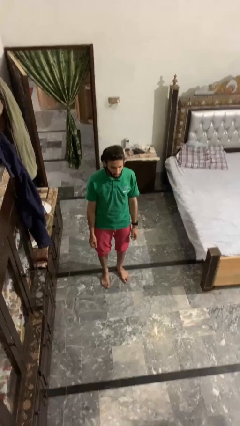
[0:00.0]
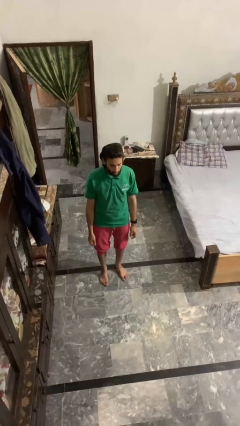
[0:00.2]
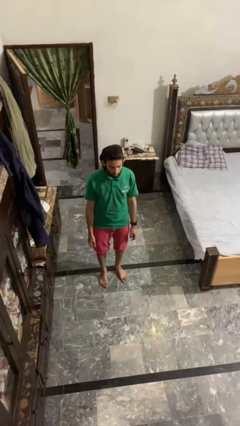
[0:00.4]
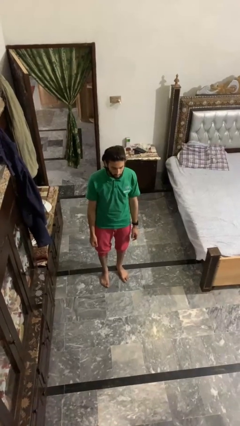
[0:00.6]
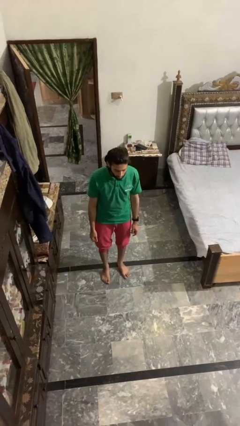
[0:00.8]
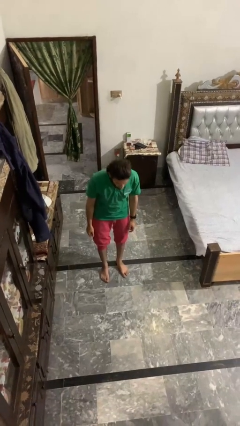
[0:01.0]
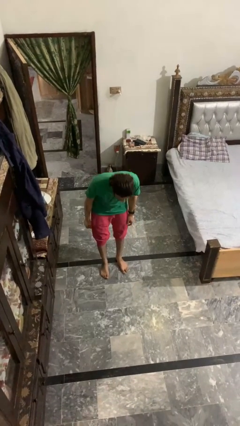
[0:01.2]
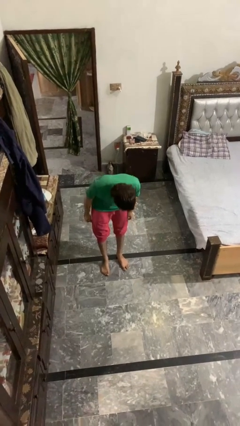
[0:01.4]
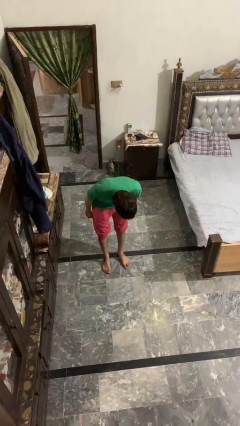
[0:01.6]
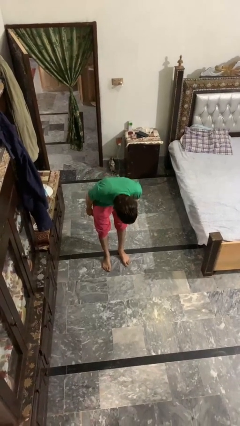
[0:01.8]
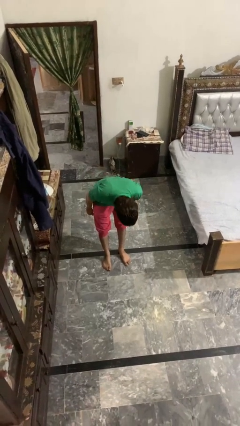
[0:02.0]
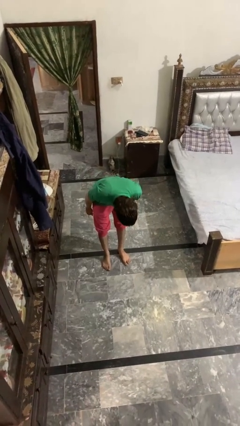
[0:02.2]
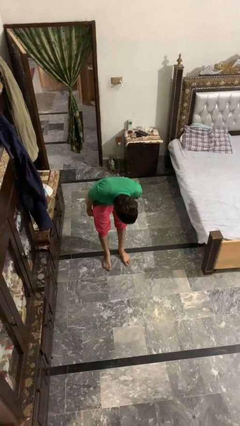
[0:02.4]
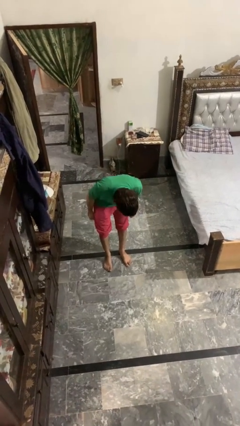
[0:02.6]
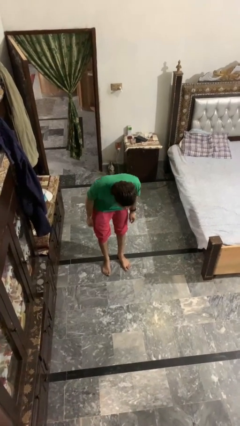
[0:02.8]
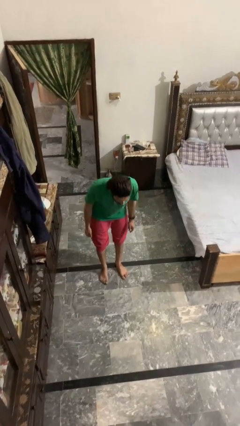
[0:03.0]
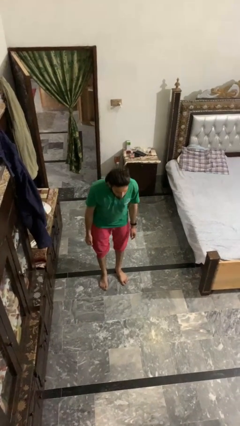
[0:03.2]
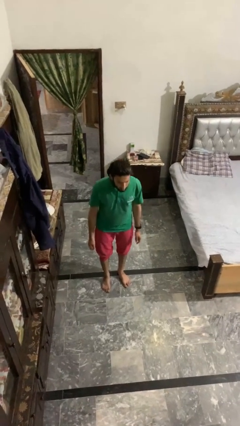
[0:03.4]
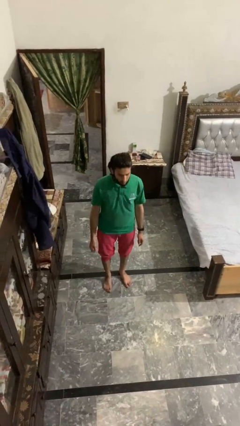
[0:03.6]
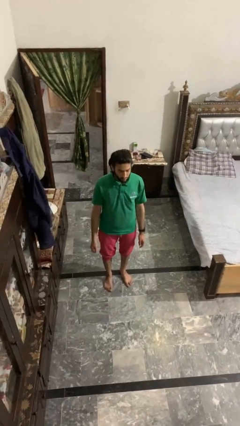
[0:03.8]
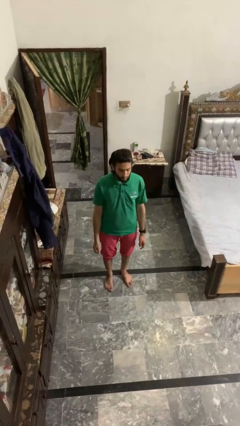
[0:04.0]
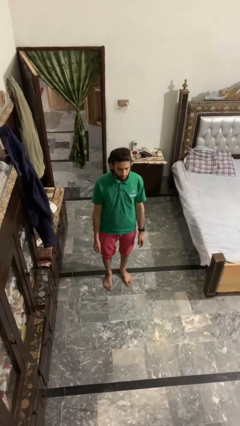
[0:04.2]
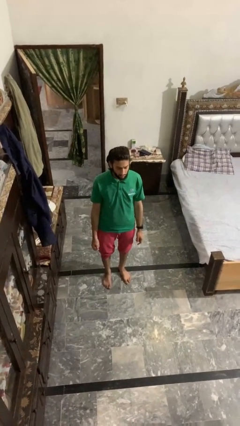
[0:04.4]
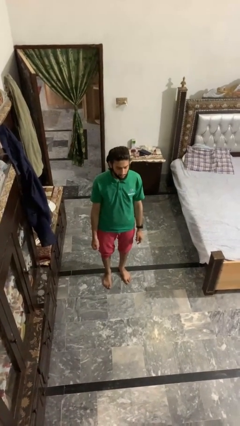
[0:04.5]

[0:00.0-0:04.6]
person bows

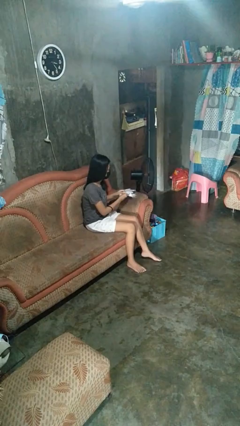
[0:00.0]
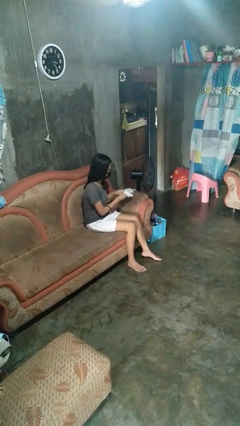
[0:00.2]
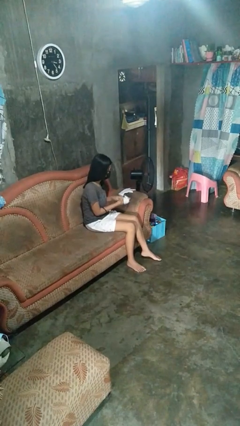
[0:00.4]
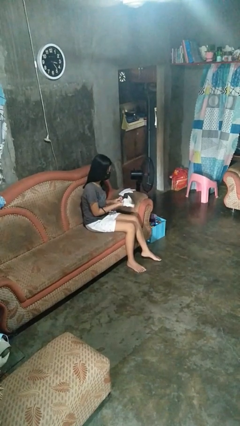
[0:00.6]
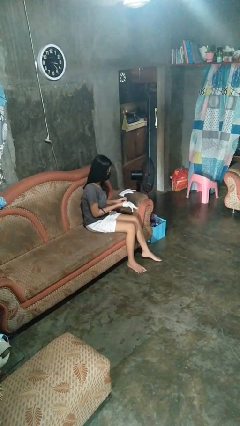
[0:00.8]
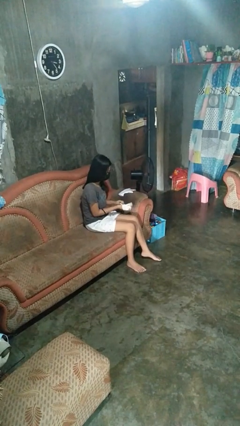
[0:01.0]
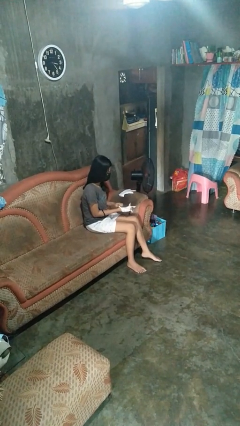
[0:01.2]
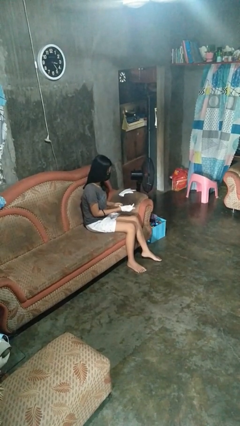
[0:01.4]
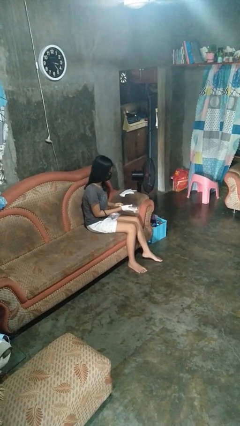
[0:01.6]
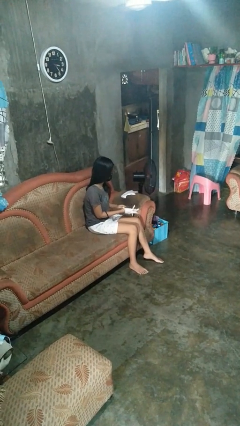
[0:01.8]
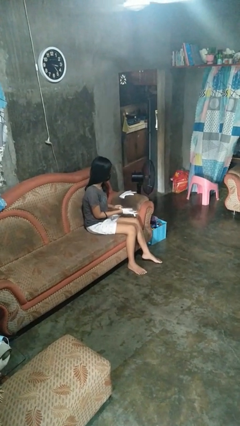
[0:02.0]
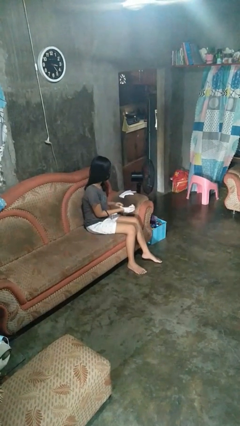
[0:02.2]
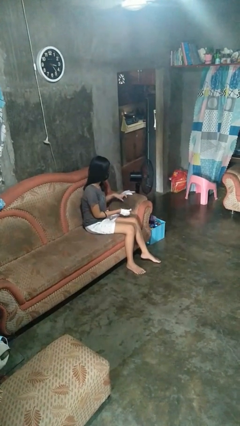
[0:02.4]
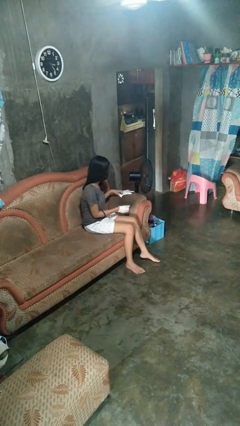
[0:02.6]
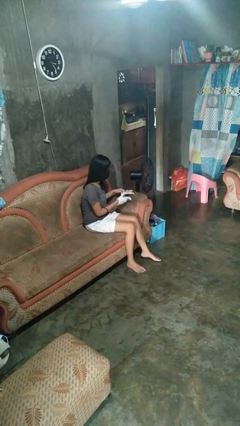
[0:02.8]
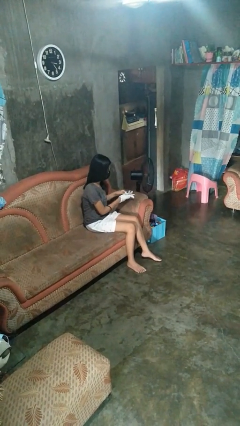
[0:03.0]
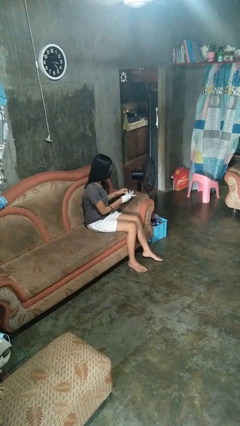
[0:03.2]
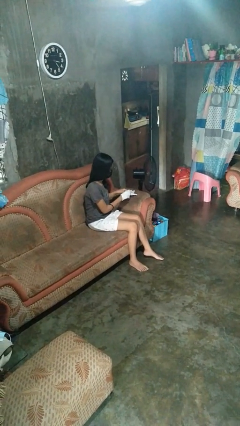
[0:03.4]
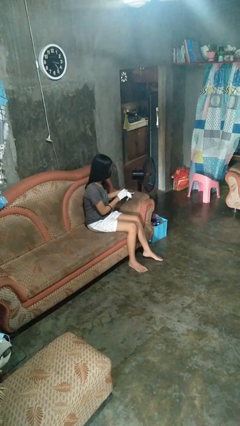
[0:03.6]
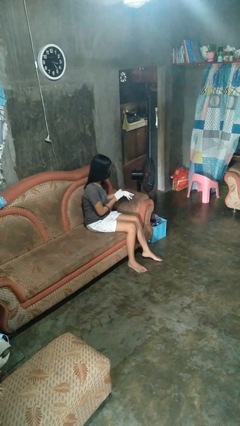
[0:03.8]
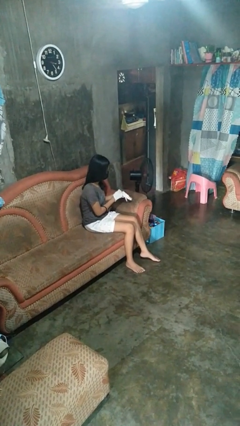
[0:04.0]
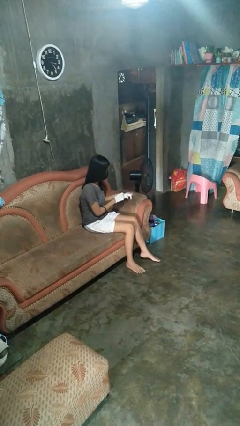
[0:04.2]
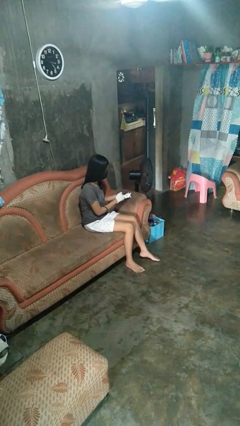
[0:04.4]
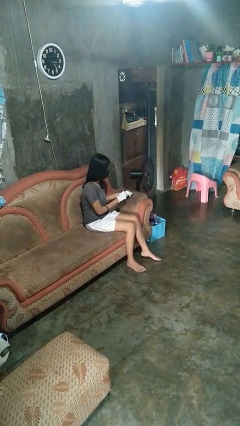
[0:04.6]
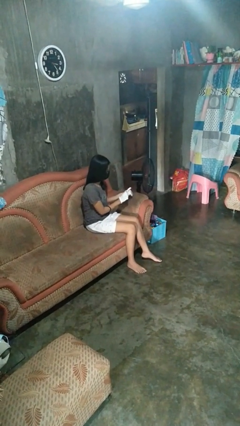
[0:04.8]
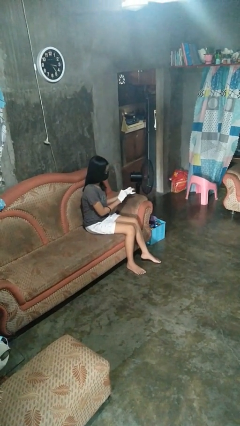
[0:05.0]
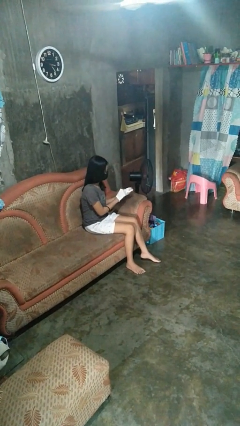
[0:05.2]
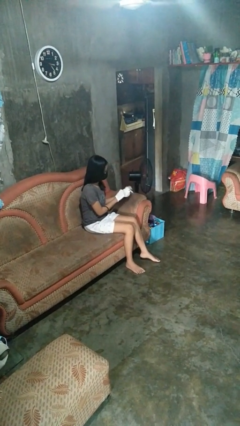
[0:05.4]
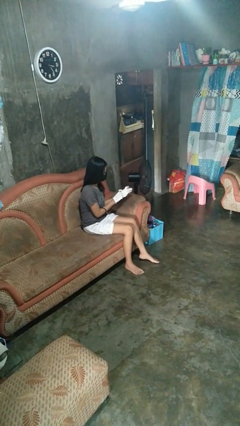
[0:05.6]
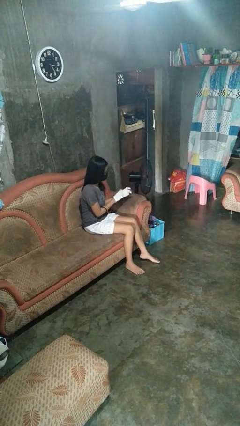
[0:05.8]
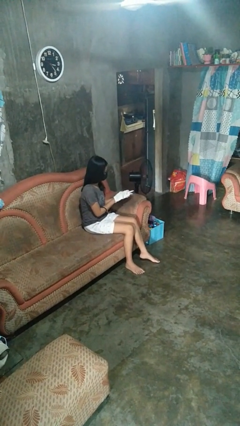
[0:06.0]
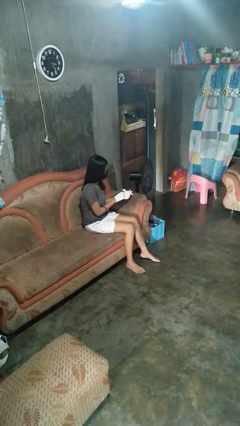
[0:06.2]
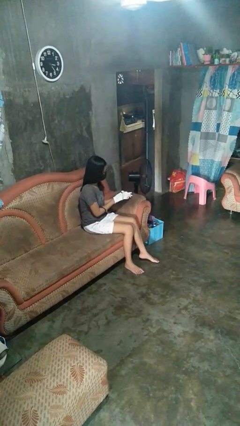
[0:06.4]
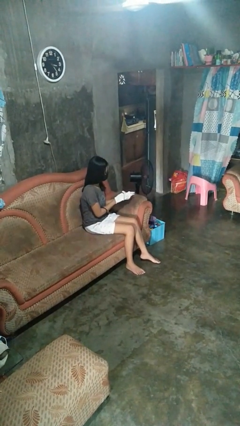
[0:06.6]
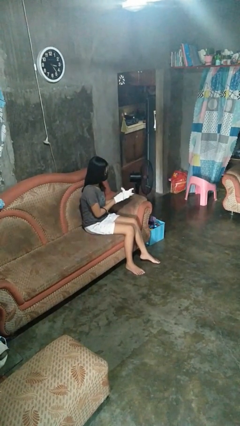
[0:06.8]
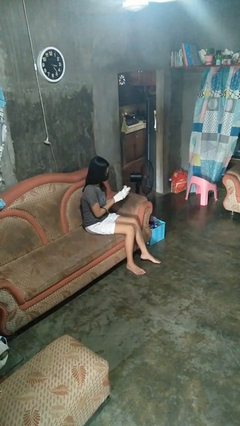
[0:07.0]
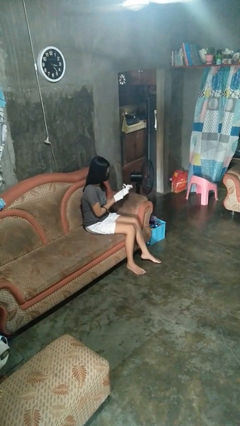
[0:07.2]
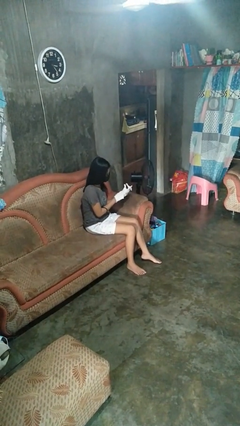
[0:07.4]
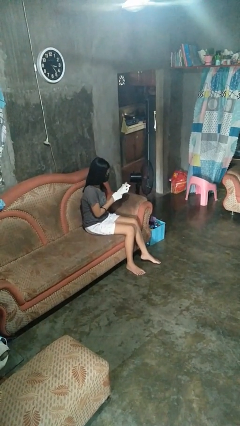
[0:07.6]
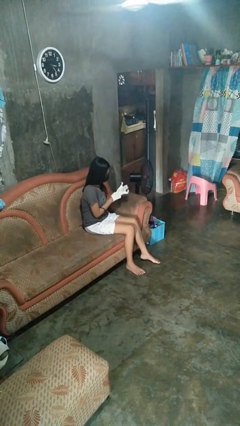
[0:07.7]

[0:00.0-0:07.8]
person puts on gloves

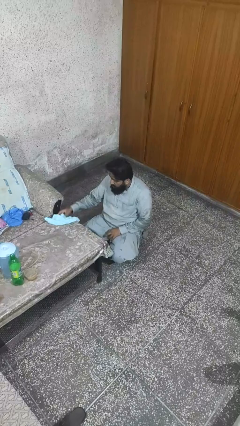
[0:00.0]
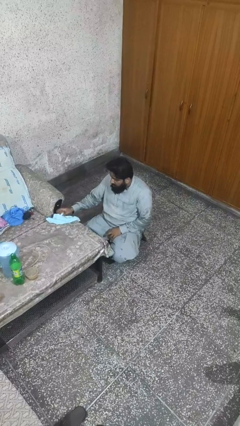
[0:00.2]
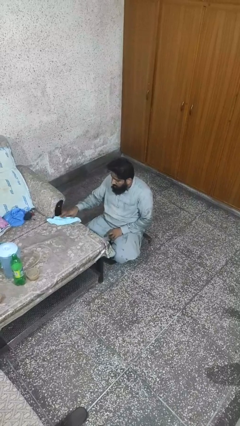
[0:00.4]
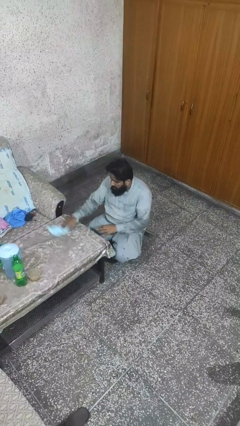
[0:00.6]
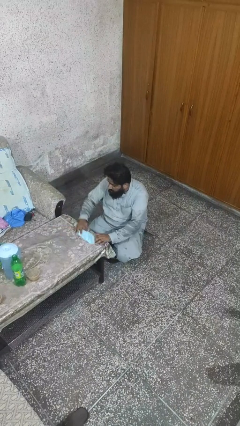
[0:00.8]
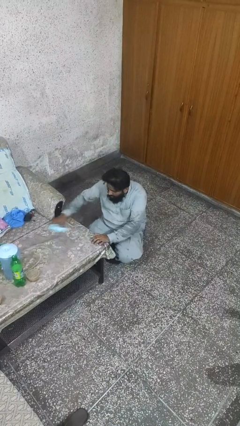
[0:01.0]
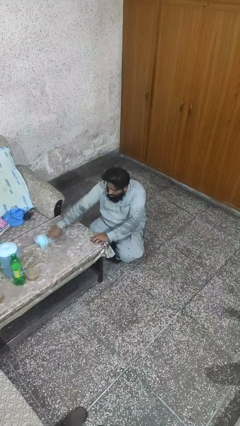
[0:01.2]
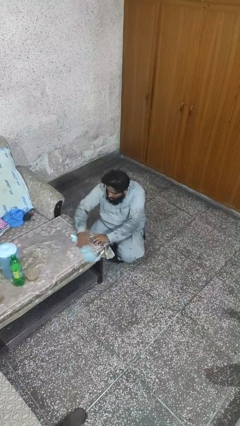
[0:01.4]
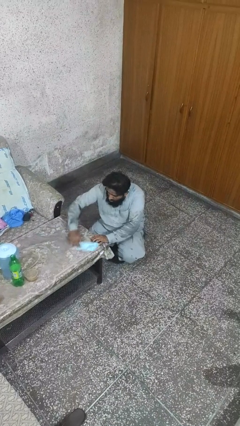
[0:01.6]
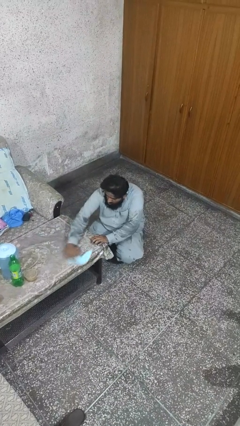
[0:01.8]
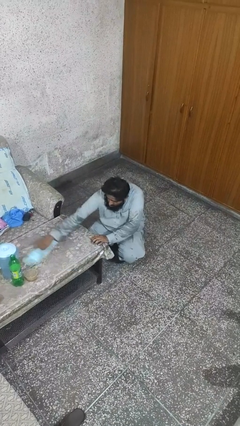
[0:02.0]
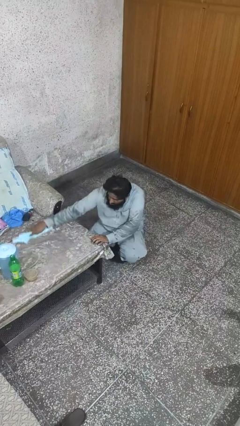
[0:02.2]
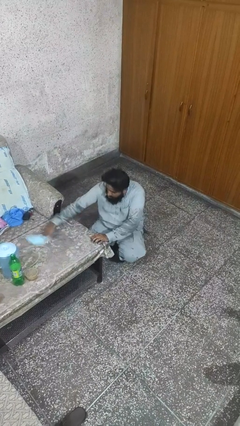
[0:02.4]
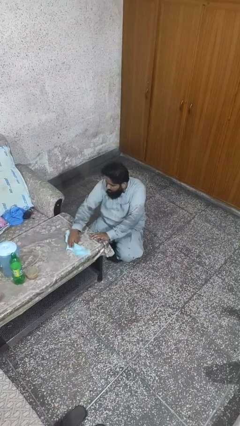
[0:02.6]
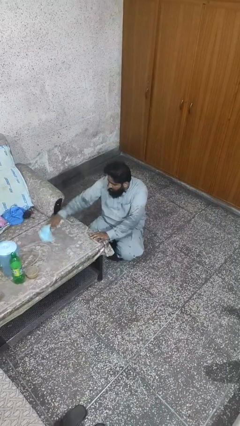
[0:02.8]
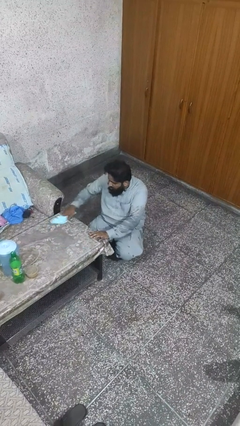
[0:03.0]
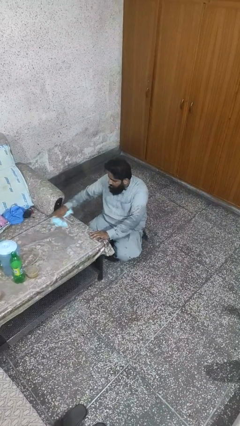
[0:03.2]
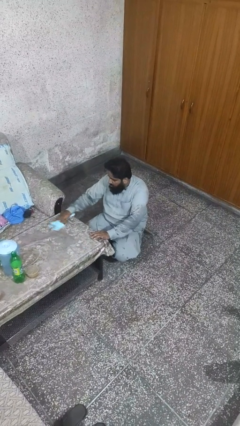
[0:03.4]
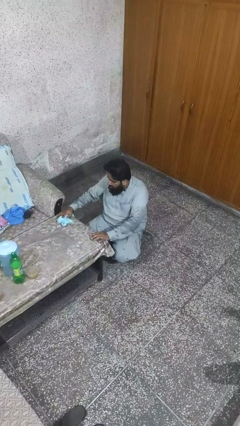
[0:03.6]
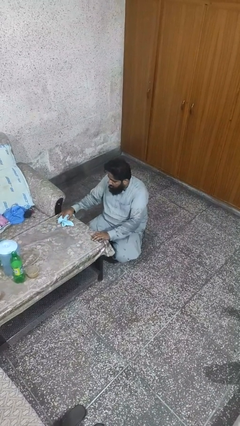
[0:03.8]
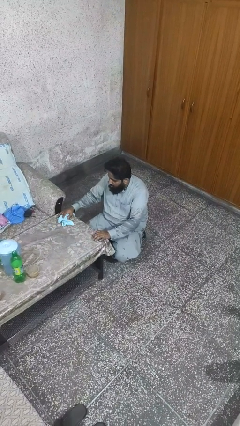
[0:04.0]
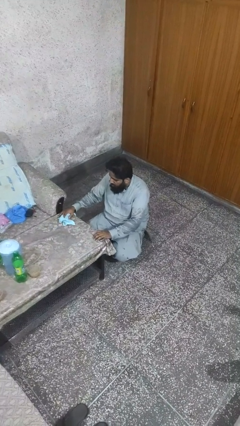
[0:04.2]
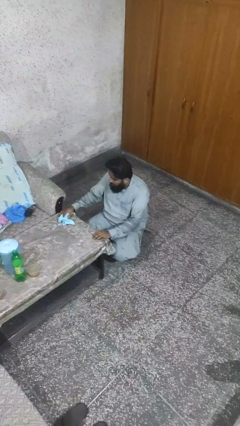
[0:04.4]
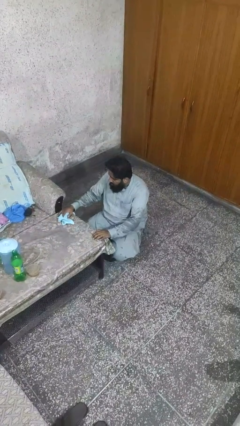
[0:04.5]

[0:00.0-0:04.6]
person cleans table with rag

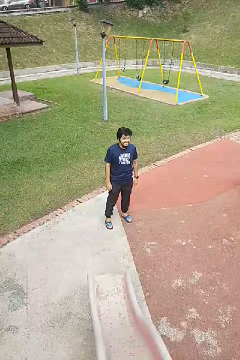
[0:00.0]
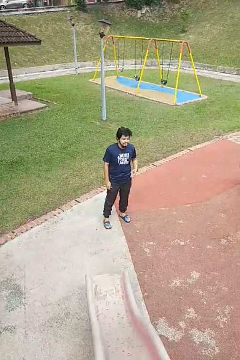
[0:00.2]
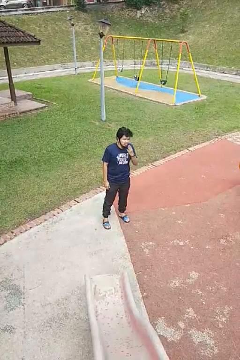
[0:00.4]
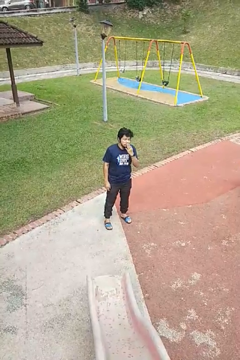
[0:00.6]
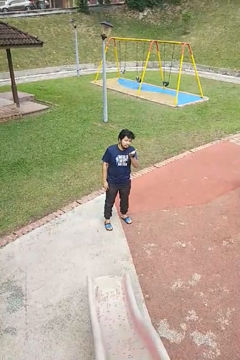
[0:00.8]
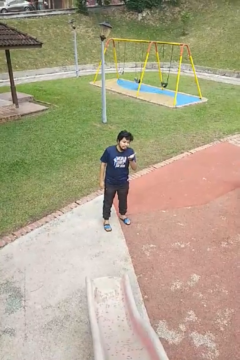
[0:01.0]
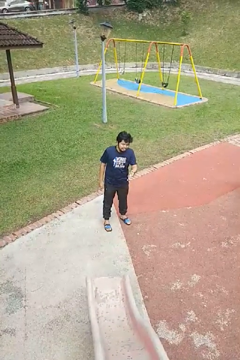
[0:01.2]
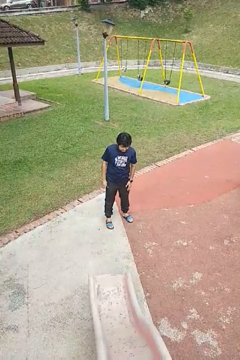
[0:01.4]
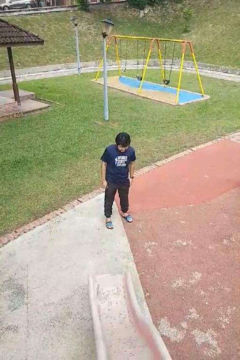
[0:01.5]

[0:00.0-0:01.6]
person gestures blow kiss
